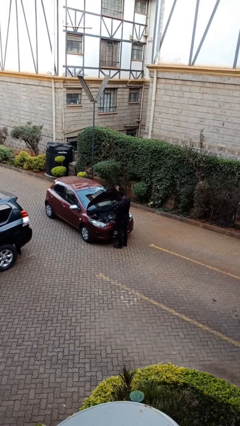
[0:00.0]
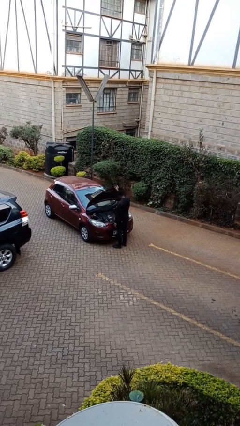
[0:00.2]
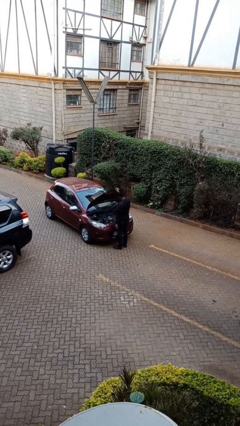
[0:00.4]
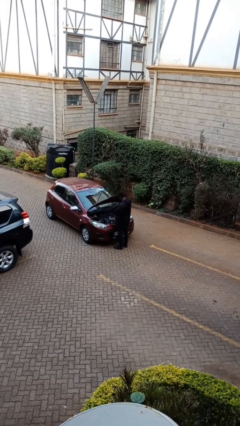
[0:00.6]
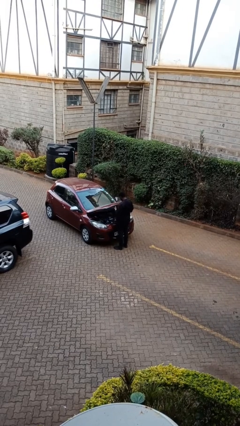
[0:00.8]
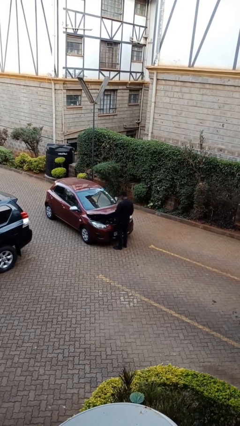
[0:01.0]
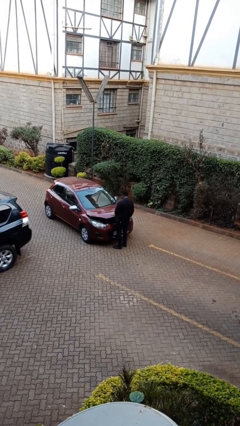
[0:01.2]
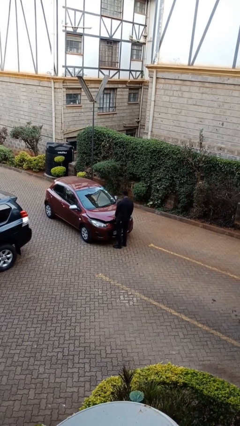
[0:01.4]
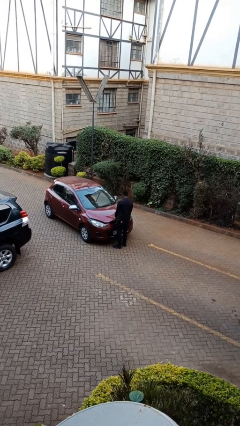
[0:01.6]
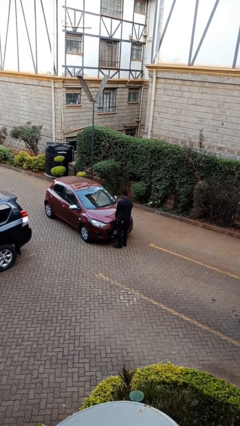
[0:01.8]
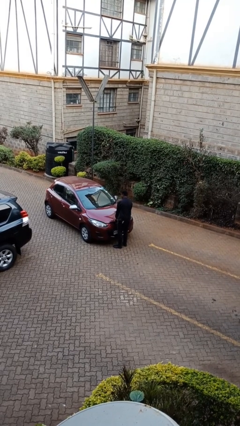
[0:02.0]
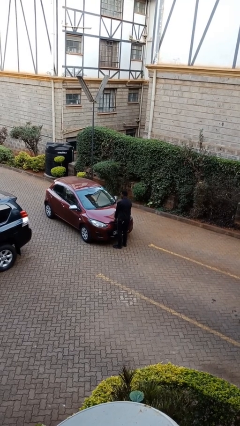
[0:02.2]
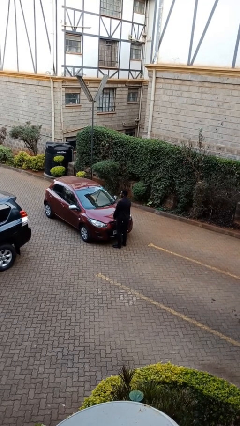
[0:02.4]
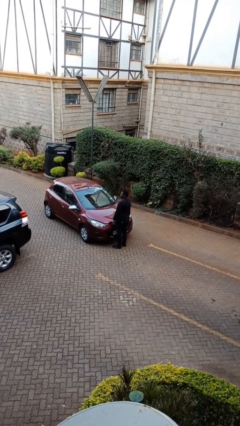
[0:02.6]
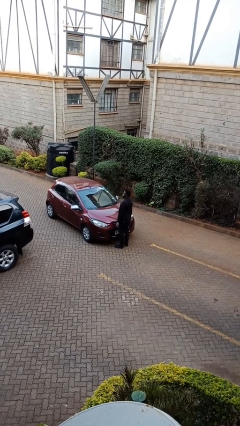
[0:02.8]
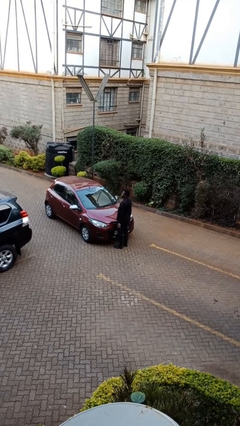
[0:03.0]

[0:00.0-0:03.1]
person closes car hood

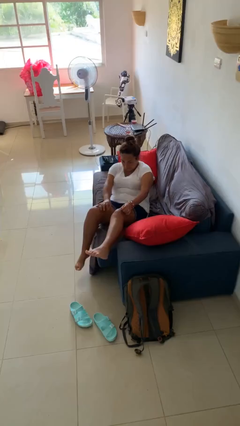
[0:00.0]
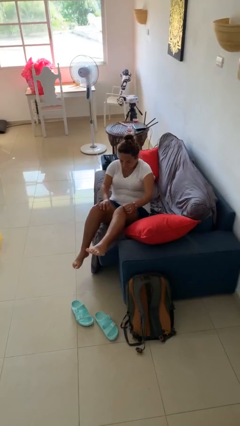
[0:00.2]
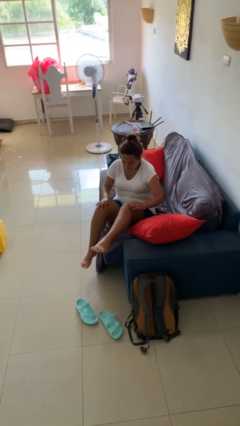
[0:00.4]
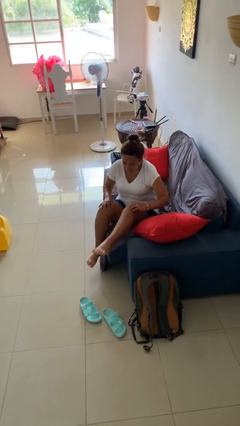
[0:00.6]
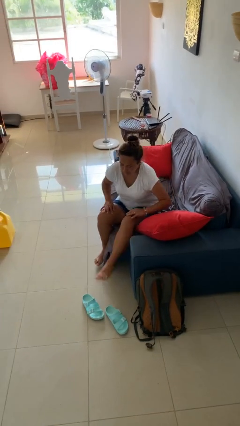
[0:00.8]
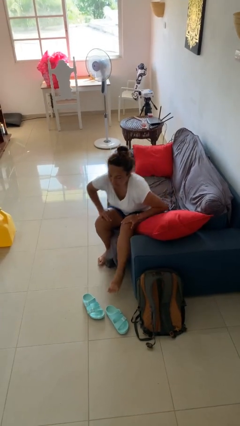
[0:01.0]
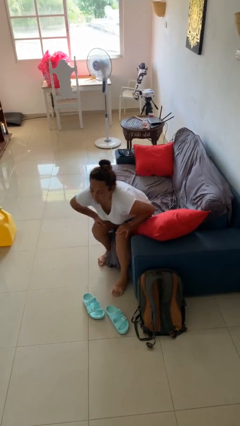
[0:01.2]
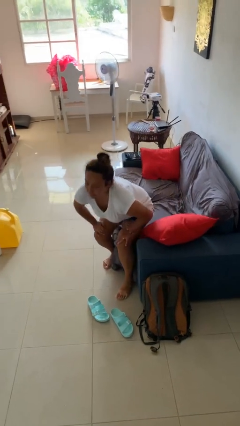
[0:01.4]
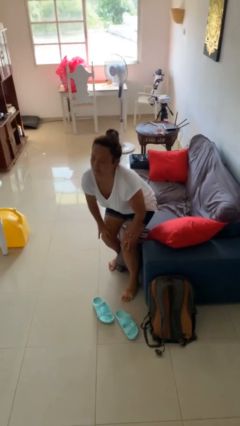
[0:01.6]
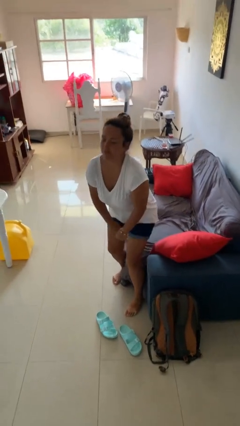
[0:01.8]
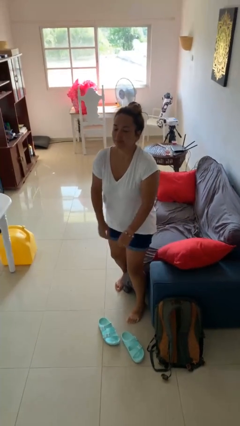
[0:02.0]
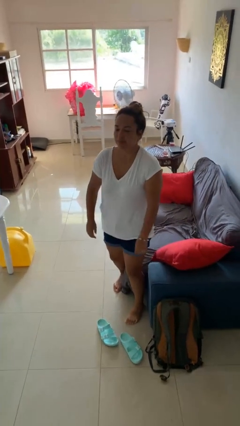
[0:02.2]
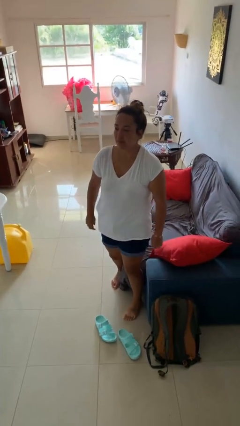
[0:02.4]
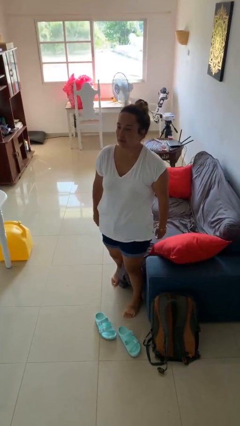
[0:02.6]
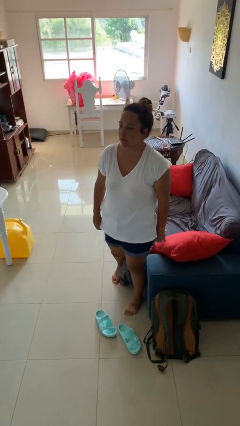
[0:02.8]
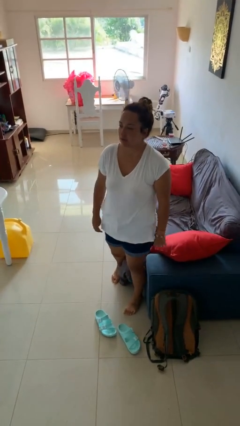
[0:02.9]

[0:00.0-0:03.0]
person stands up

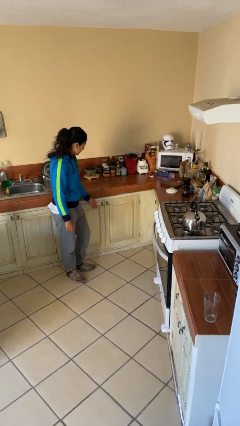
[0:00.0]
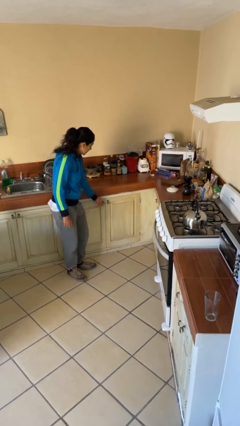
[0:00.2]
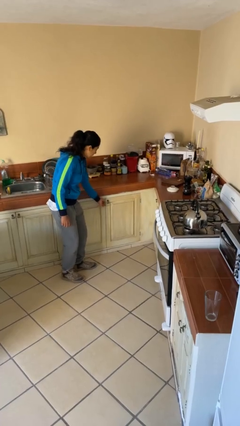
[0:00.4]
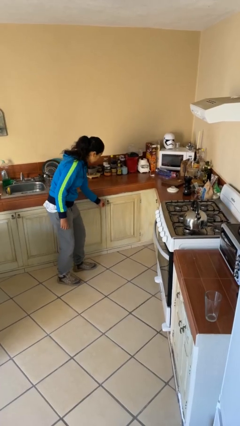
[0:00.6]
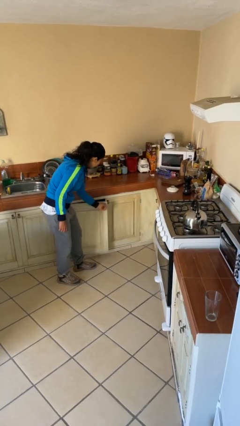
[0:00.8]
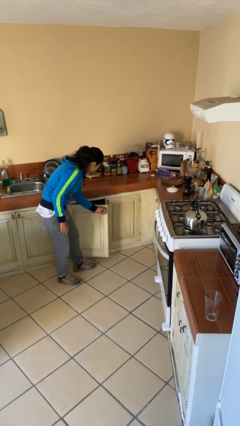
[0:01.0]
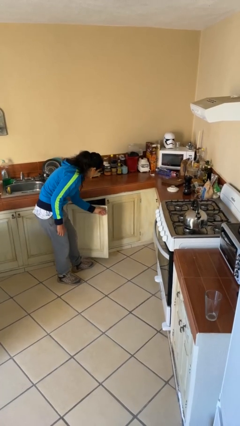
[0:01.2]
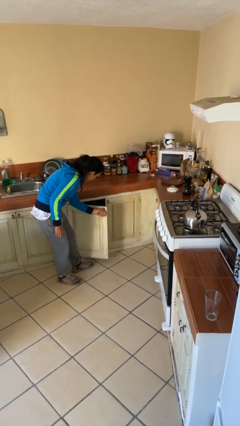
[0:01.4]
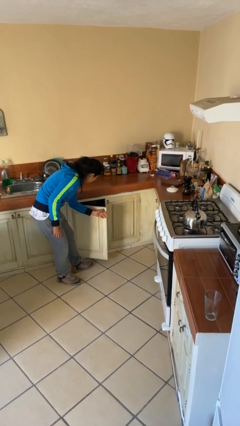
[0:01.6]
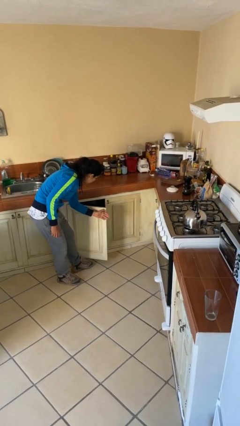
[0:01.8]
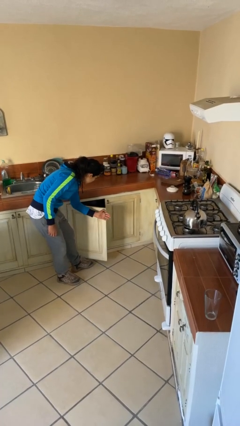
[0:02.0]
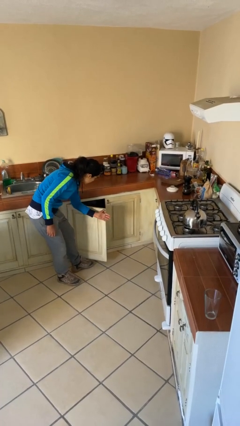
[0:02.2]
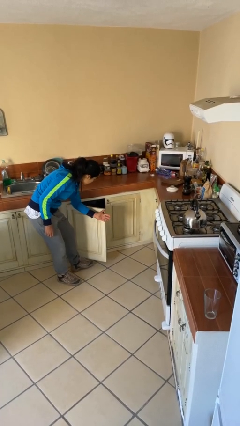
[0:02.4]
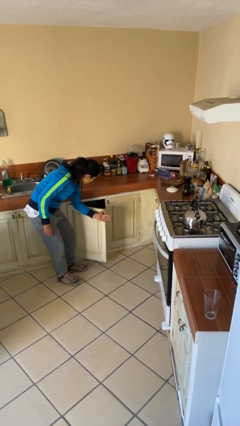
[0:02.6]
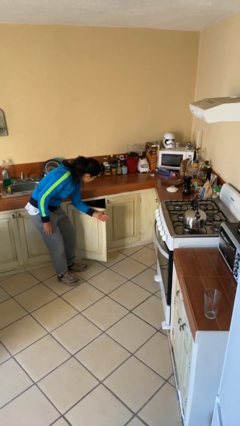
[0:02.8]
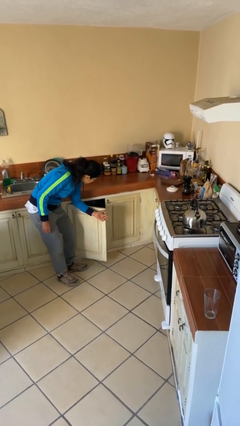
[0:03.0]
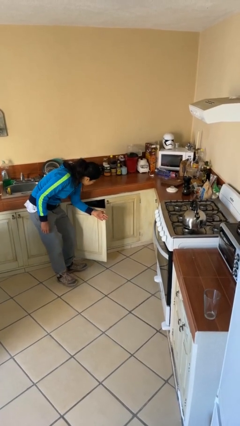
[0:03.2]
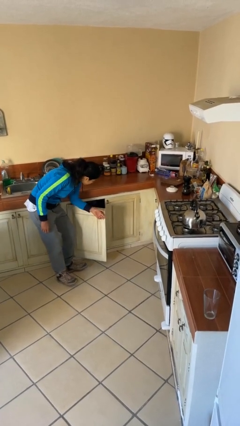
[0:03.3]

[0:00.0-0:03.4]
person opens cabinet

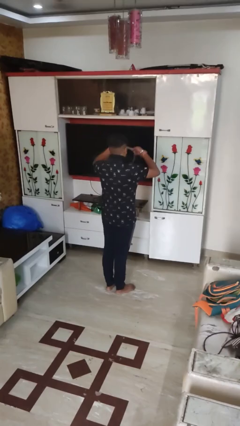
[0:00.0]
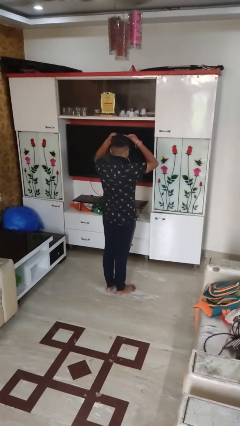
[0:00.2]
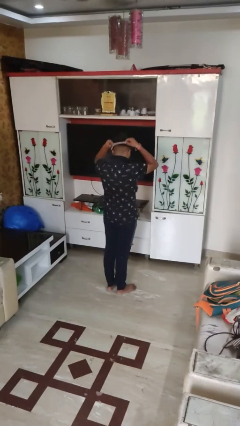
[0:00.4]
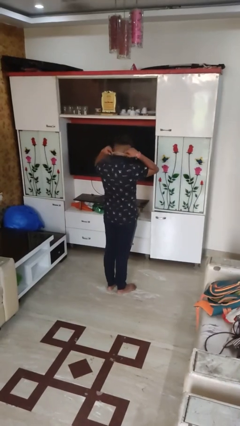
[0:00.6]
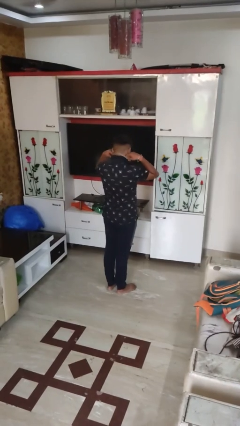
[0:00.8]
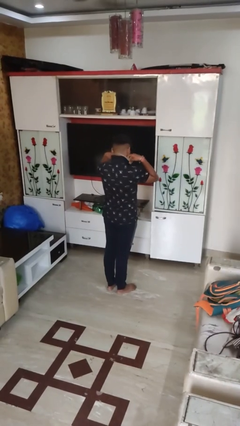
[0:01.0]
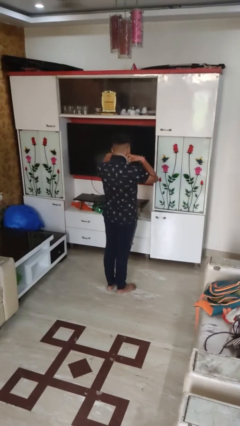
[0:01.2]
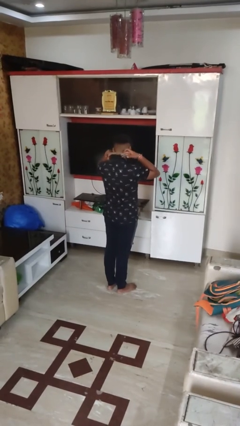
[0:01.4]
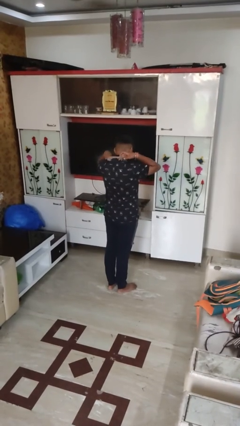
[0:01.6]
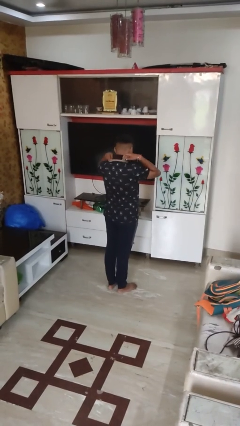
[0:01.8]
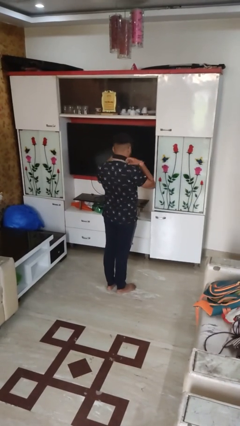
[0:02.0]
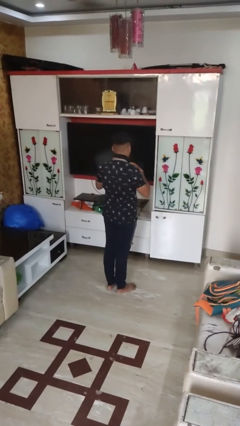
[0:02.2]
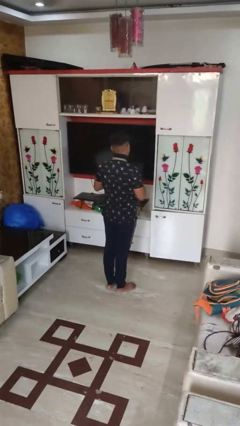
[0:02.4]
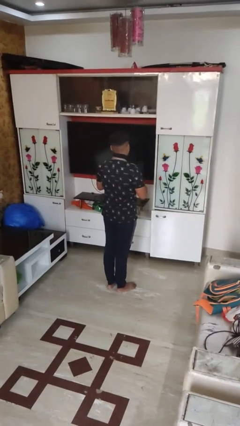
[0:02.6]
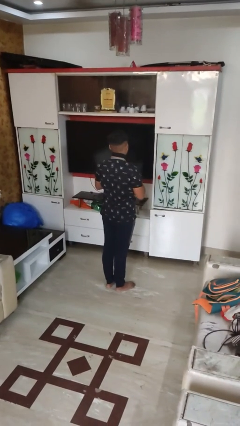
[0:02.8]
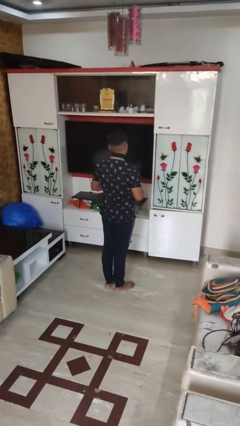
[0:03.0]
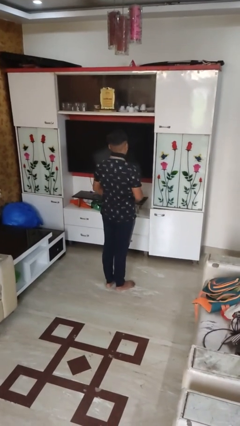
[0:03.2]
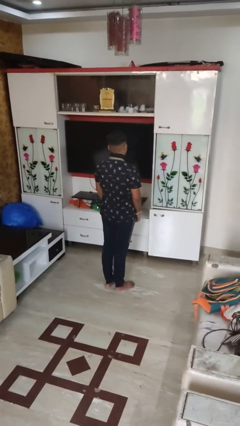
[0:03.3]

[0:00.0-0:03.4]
person puts on necktie

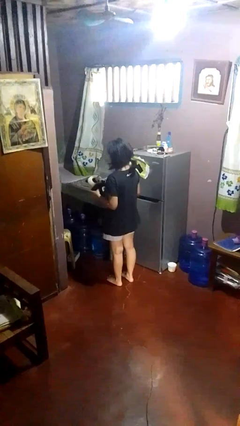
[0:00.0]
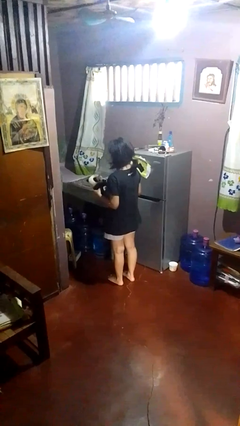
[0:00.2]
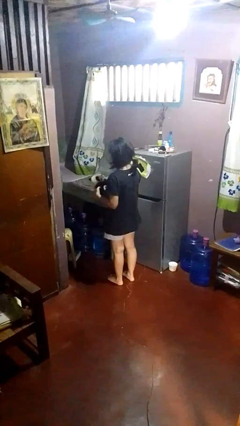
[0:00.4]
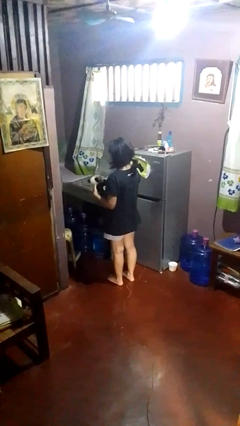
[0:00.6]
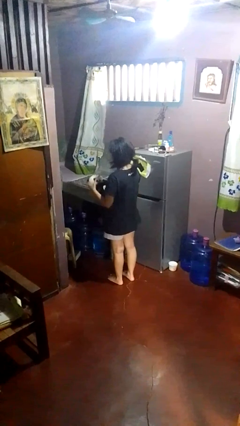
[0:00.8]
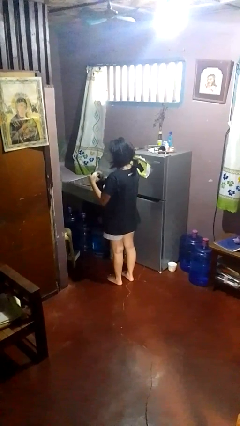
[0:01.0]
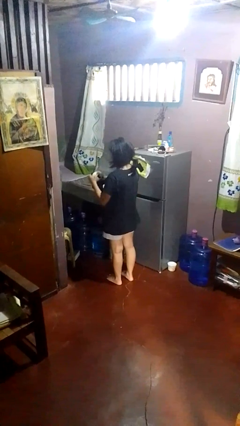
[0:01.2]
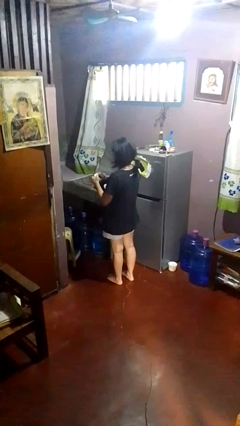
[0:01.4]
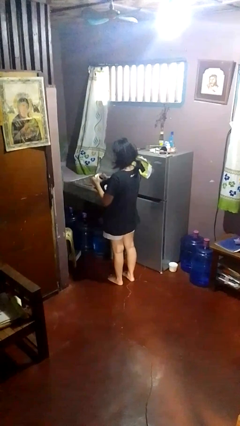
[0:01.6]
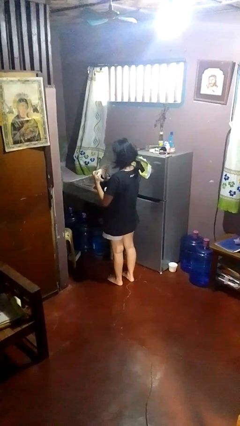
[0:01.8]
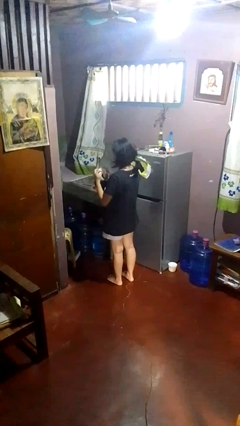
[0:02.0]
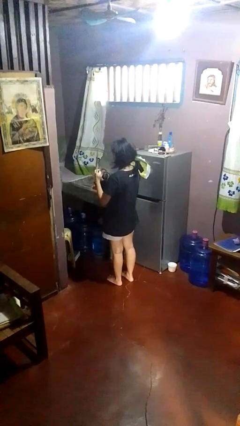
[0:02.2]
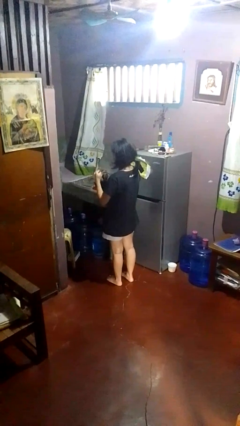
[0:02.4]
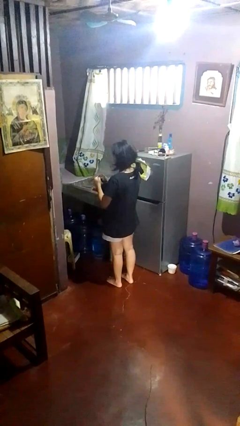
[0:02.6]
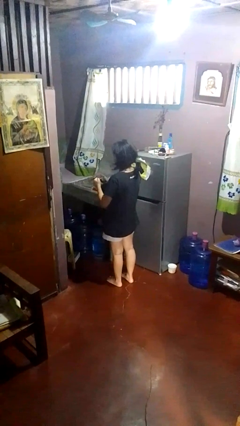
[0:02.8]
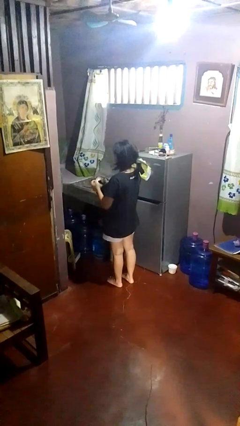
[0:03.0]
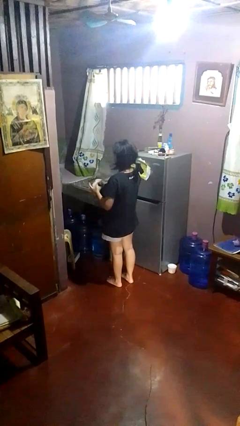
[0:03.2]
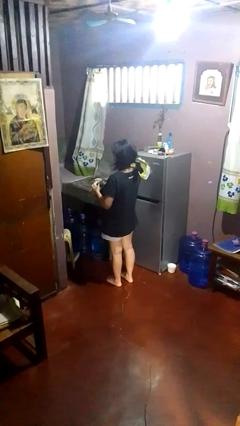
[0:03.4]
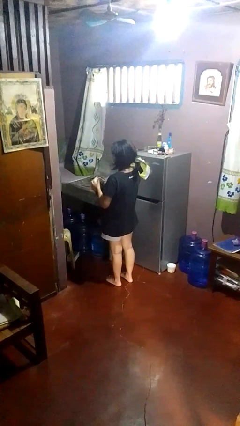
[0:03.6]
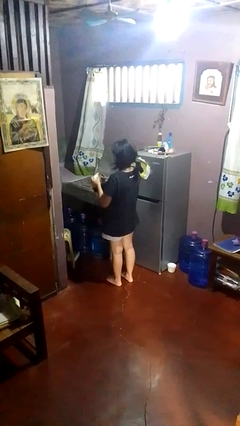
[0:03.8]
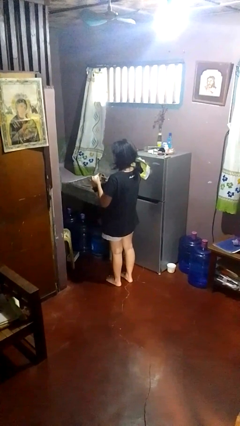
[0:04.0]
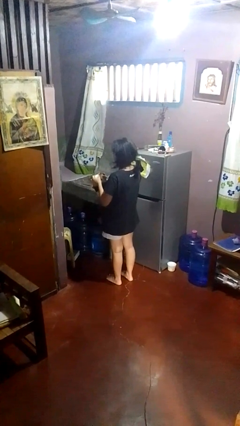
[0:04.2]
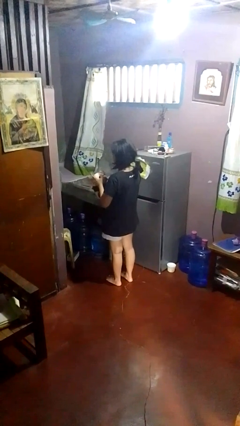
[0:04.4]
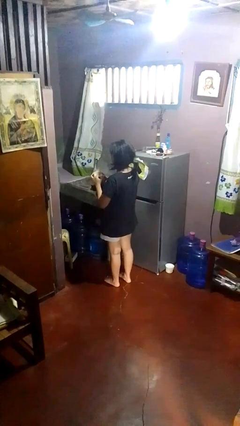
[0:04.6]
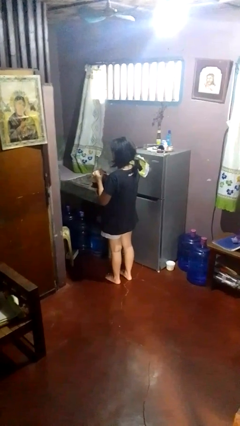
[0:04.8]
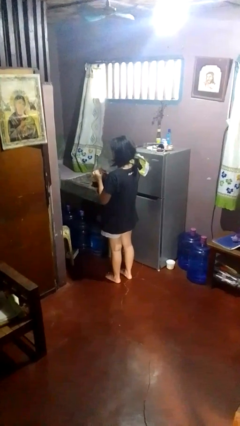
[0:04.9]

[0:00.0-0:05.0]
person squeezes object
